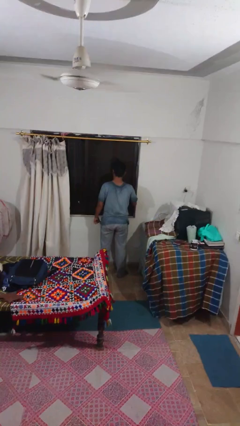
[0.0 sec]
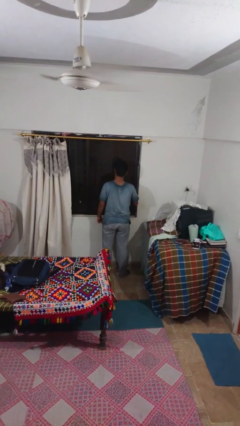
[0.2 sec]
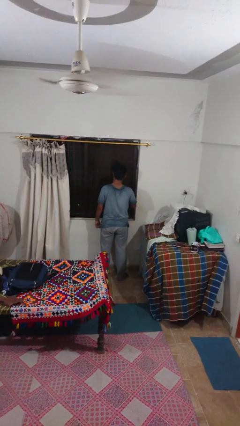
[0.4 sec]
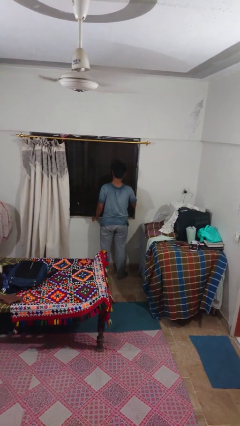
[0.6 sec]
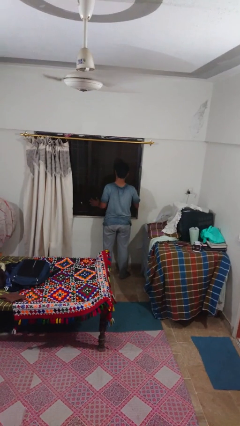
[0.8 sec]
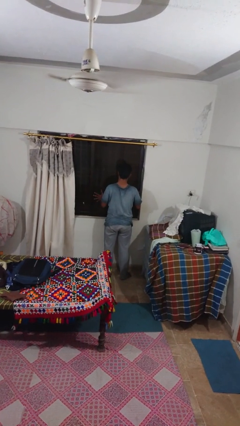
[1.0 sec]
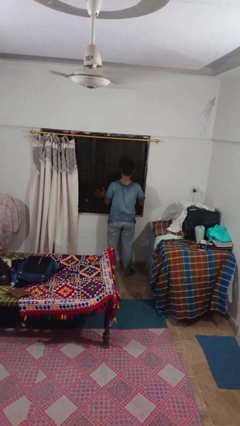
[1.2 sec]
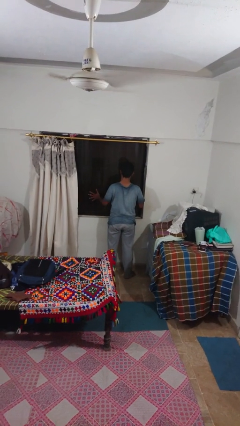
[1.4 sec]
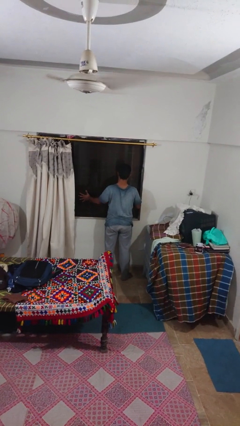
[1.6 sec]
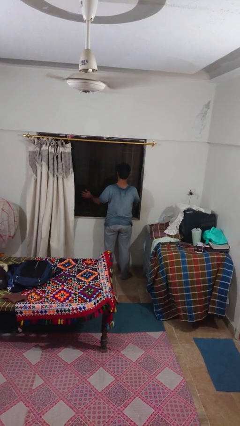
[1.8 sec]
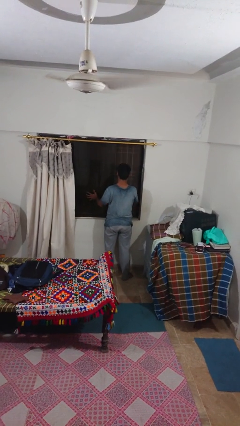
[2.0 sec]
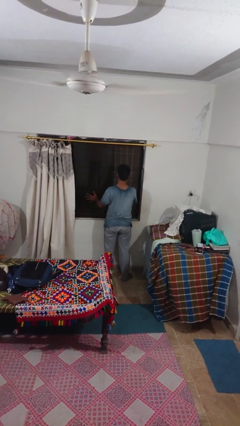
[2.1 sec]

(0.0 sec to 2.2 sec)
person opens sliding door

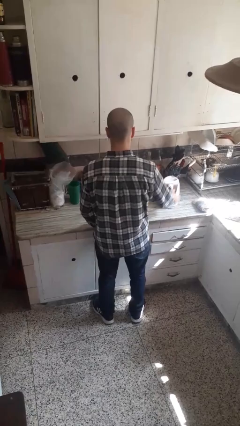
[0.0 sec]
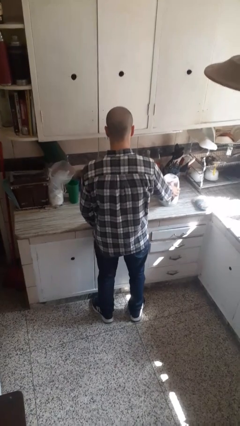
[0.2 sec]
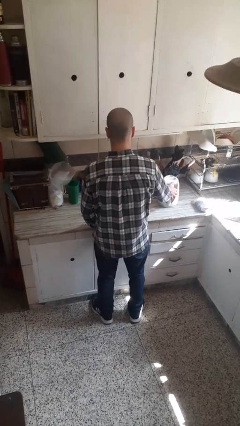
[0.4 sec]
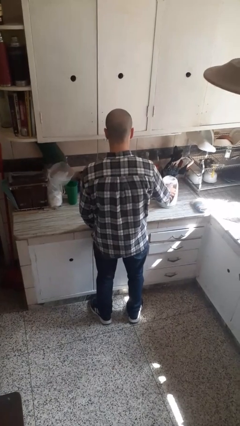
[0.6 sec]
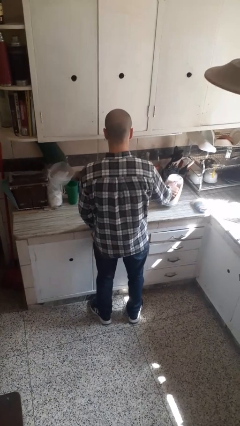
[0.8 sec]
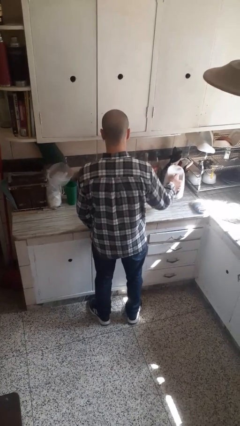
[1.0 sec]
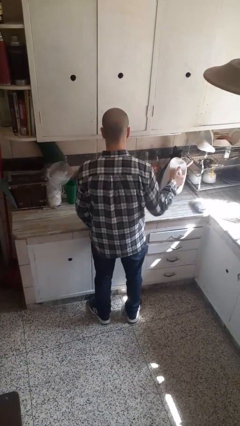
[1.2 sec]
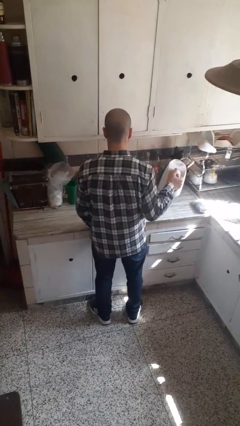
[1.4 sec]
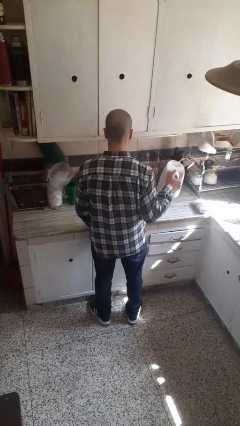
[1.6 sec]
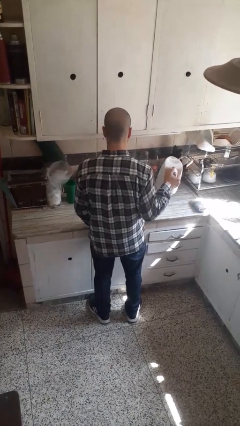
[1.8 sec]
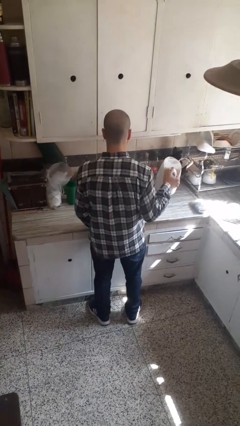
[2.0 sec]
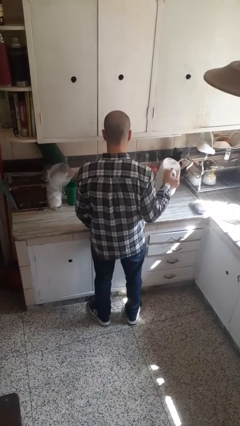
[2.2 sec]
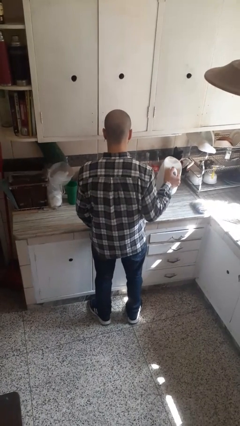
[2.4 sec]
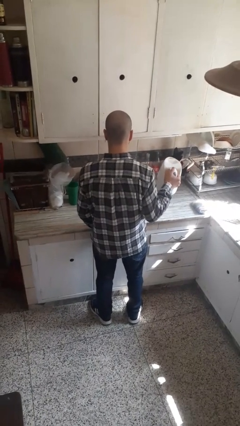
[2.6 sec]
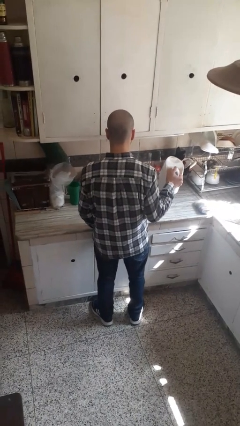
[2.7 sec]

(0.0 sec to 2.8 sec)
person picks up object from countertop

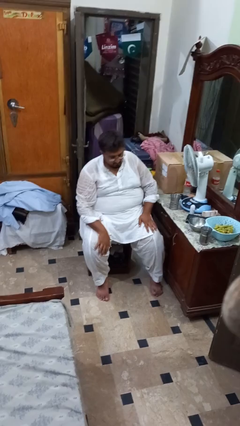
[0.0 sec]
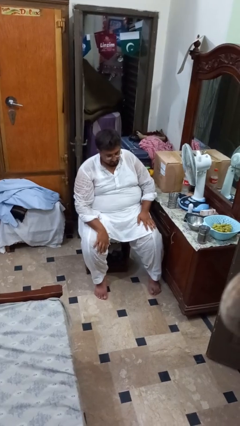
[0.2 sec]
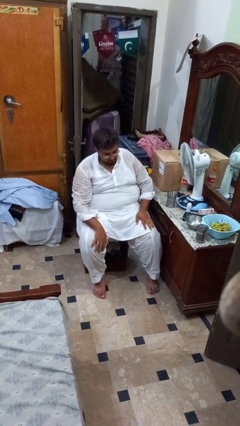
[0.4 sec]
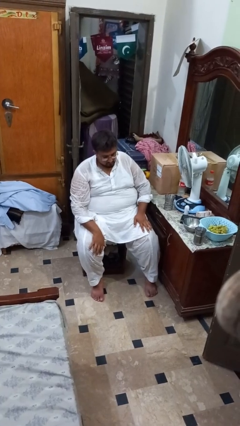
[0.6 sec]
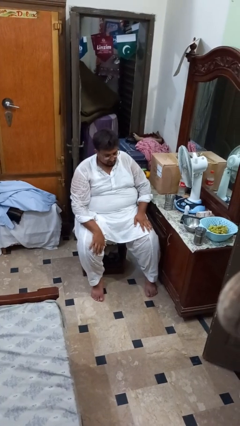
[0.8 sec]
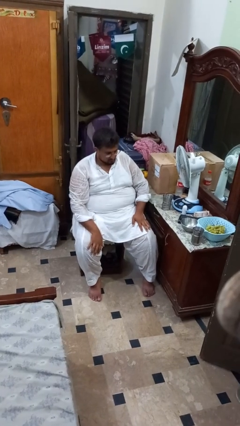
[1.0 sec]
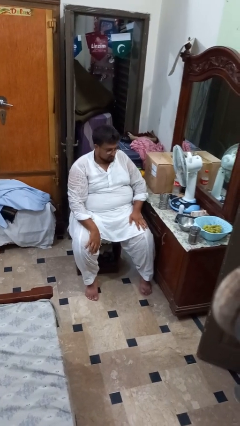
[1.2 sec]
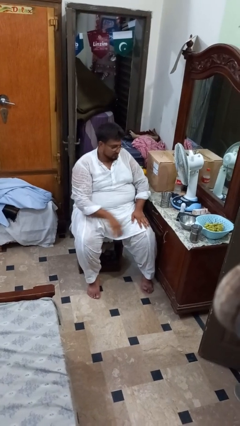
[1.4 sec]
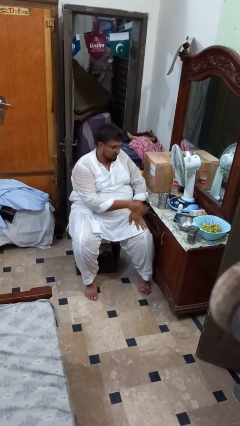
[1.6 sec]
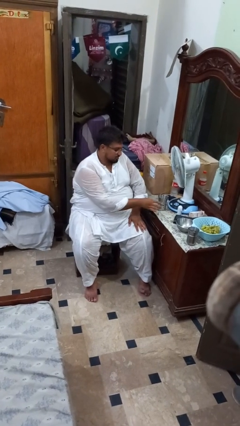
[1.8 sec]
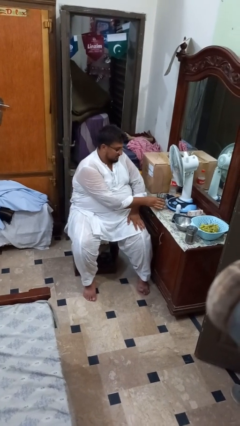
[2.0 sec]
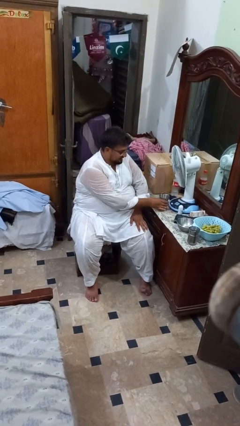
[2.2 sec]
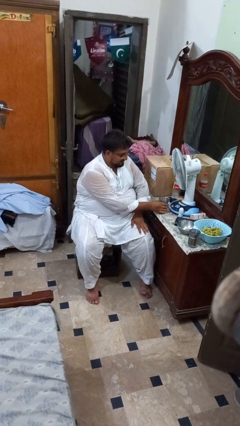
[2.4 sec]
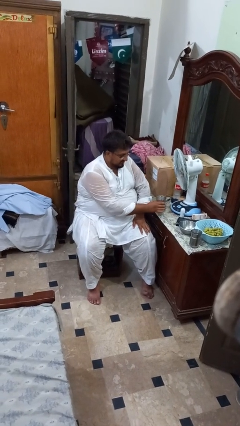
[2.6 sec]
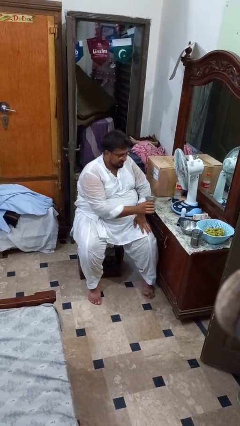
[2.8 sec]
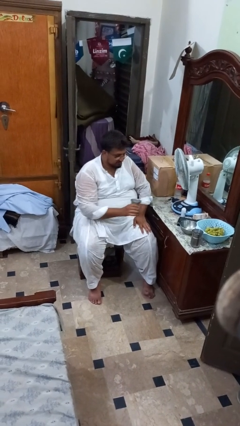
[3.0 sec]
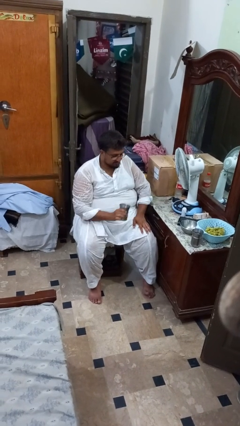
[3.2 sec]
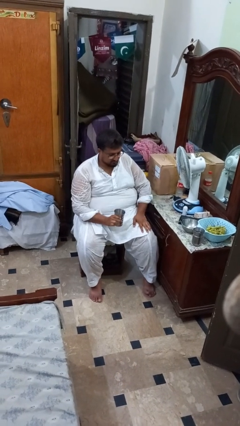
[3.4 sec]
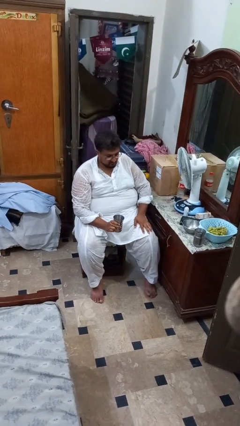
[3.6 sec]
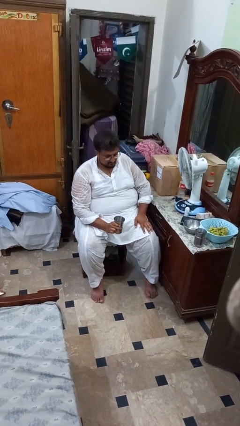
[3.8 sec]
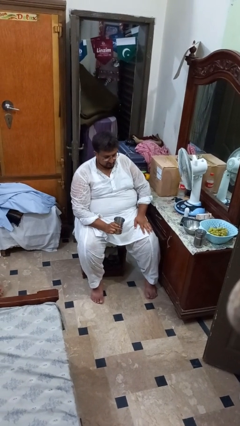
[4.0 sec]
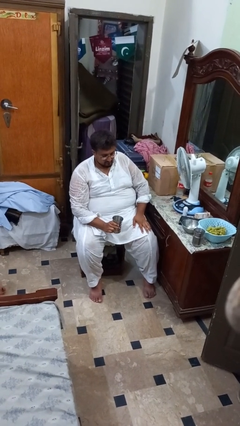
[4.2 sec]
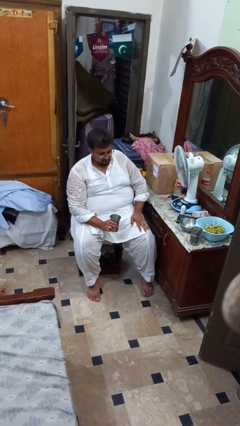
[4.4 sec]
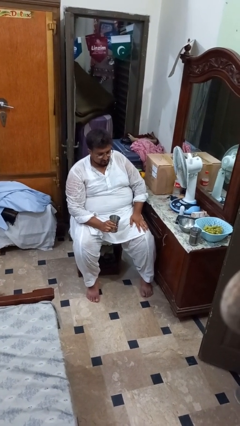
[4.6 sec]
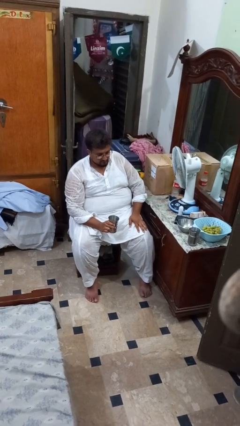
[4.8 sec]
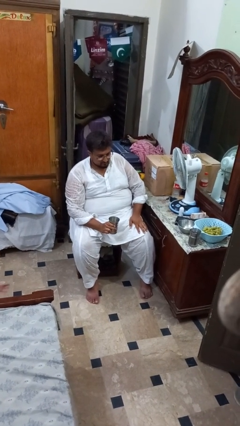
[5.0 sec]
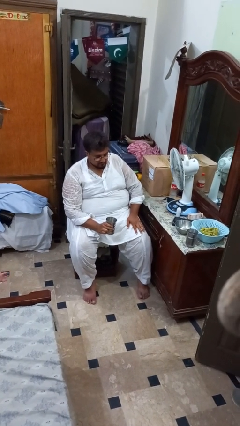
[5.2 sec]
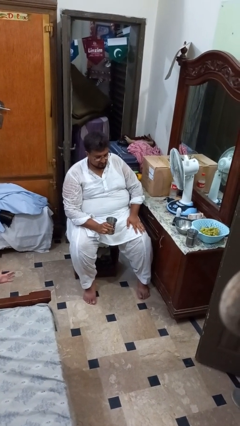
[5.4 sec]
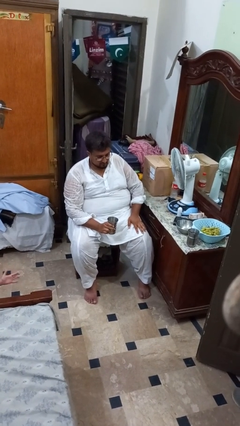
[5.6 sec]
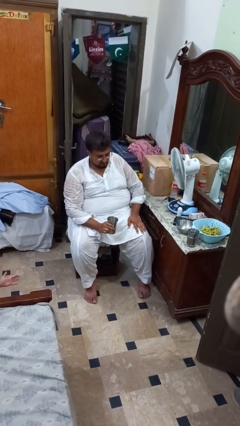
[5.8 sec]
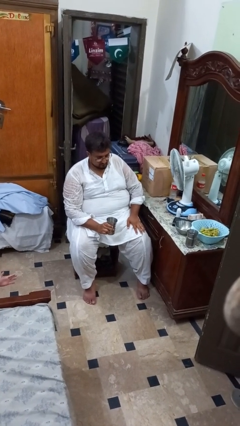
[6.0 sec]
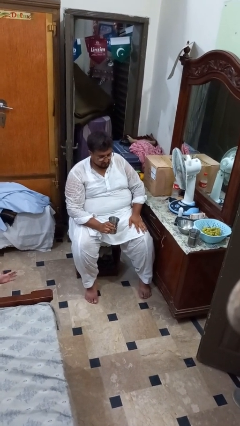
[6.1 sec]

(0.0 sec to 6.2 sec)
person picks up object from table

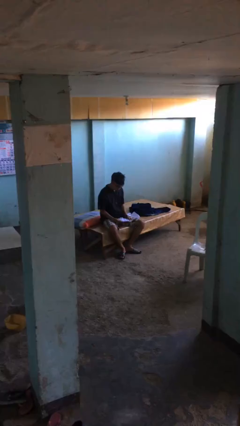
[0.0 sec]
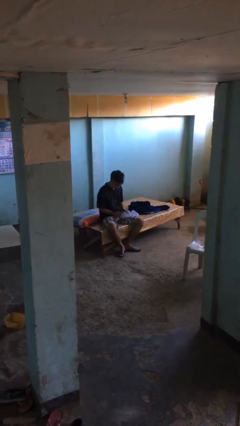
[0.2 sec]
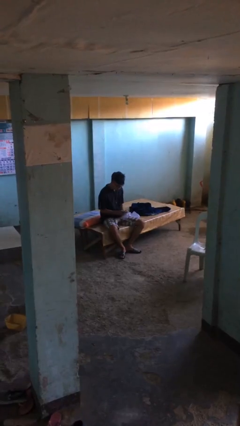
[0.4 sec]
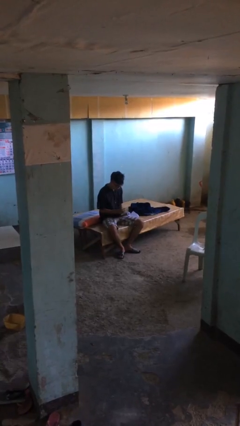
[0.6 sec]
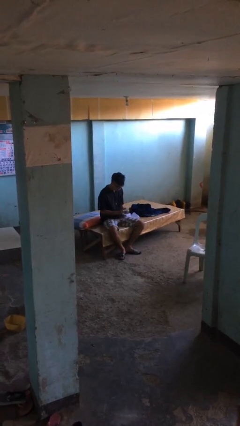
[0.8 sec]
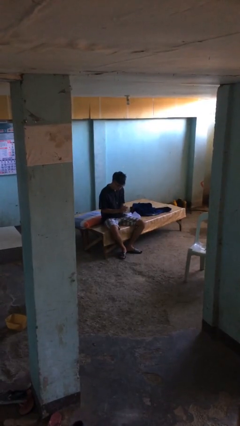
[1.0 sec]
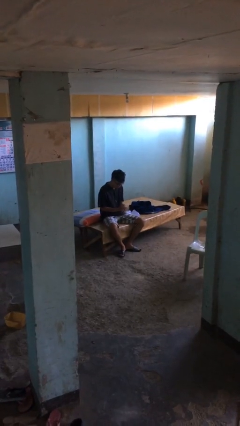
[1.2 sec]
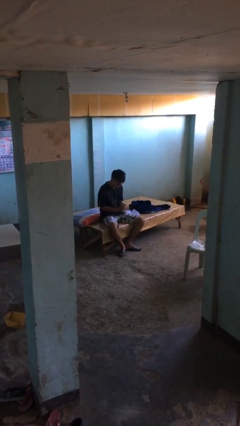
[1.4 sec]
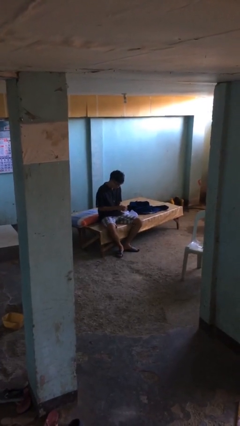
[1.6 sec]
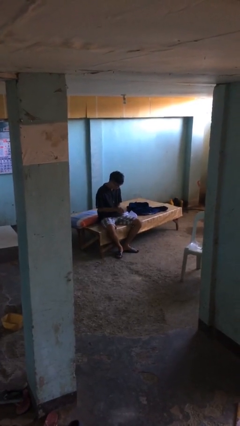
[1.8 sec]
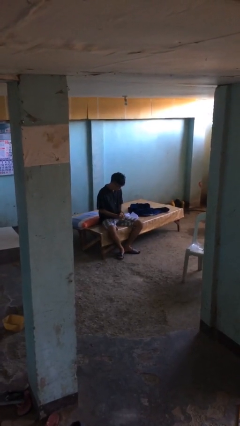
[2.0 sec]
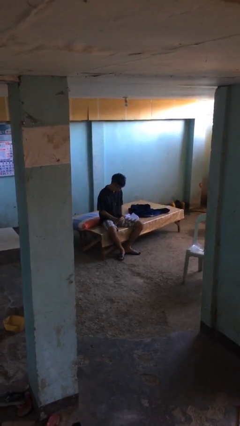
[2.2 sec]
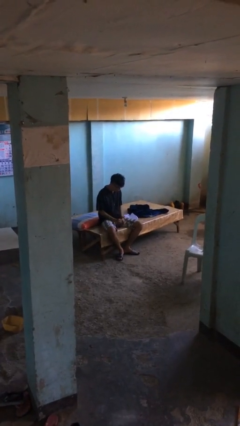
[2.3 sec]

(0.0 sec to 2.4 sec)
person crumples paper

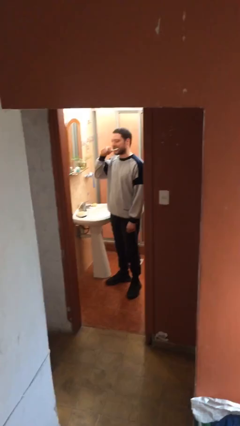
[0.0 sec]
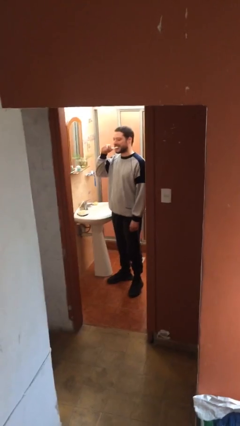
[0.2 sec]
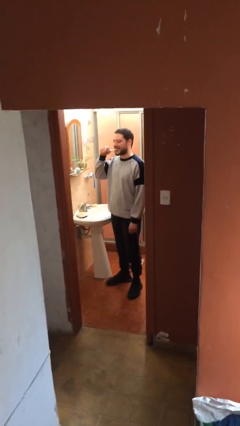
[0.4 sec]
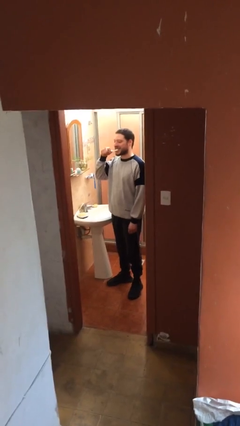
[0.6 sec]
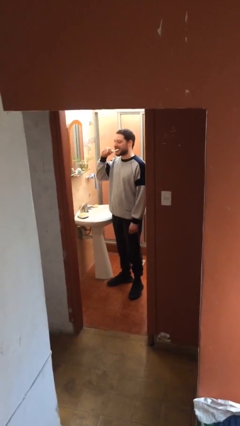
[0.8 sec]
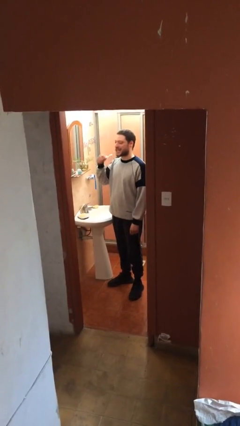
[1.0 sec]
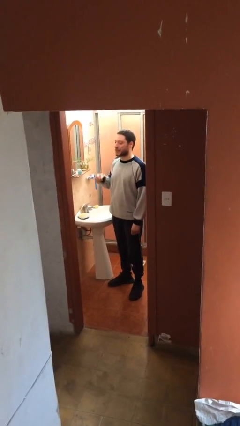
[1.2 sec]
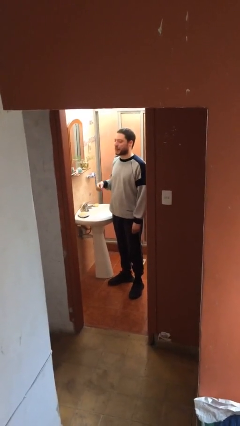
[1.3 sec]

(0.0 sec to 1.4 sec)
person brushes teeth

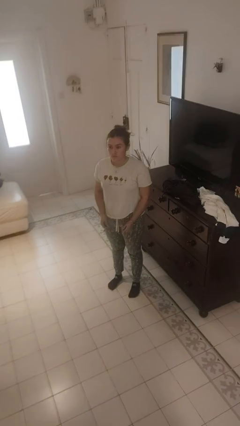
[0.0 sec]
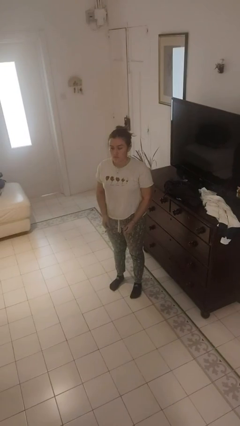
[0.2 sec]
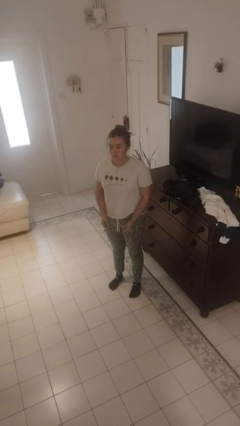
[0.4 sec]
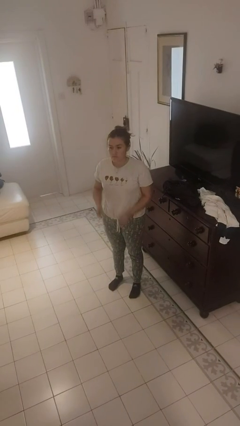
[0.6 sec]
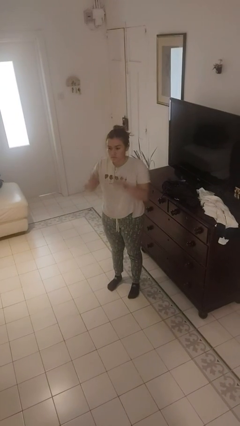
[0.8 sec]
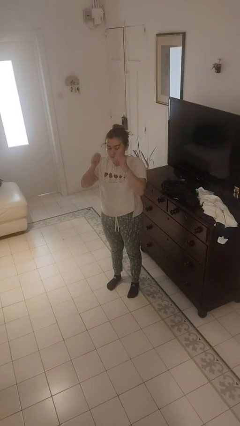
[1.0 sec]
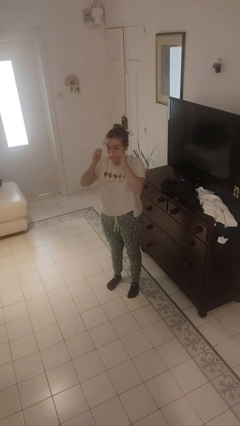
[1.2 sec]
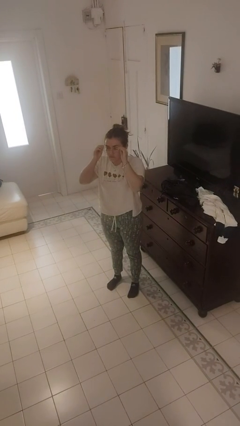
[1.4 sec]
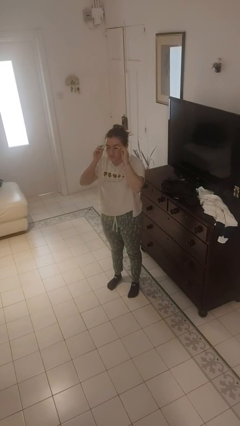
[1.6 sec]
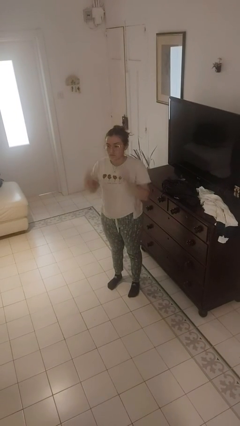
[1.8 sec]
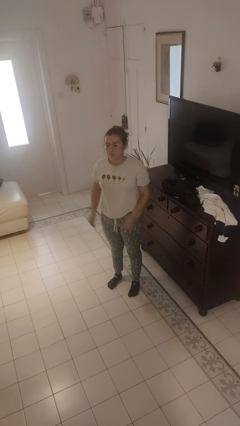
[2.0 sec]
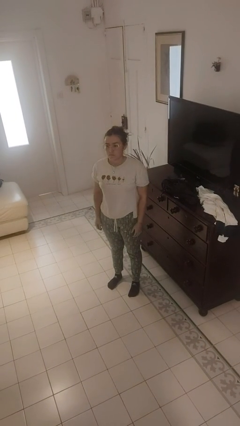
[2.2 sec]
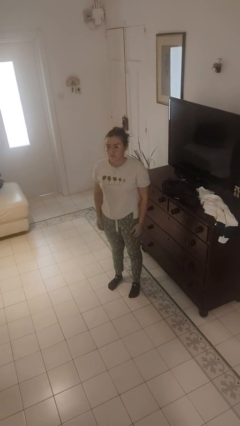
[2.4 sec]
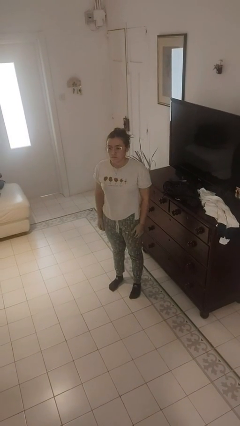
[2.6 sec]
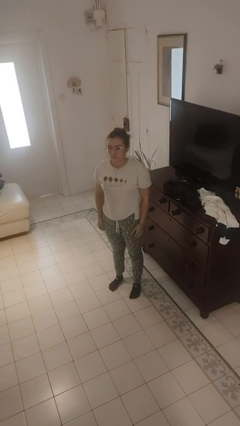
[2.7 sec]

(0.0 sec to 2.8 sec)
person puts on glasses
